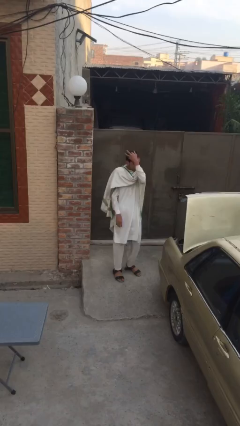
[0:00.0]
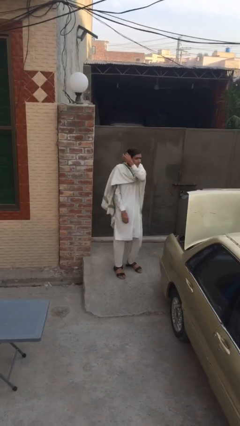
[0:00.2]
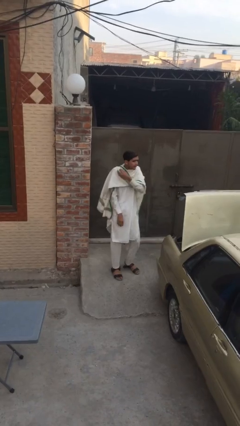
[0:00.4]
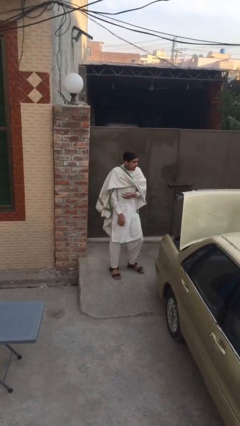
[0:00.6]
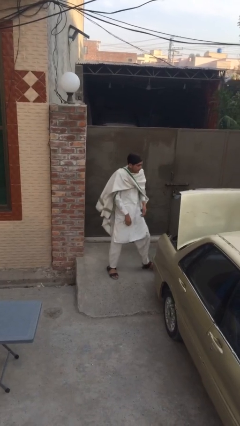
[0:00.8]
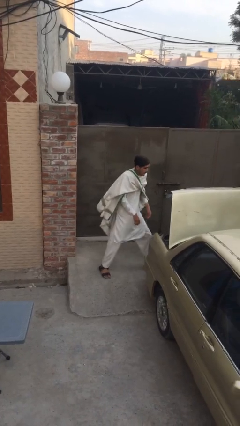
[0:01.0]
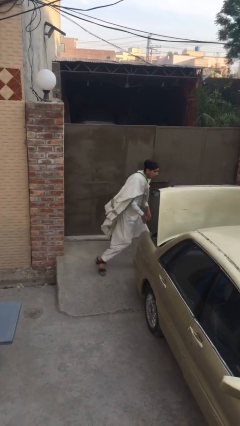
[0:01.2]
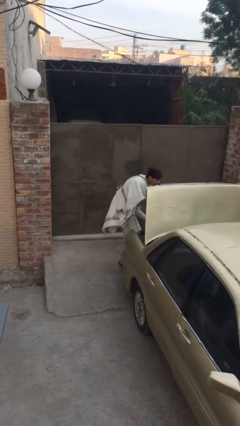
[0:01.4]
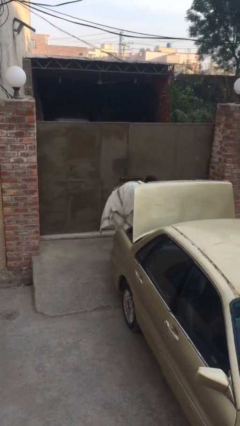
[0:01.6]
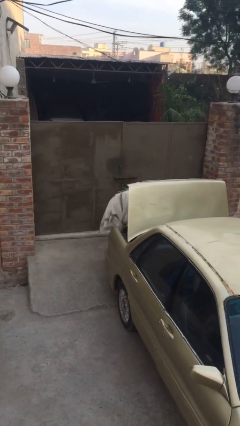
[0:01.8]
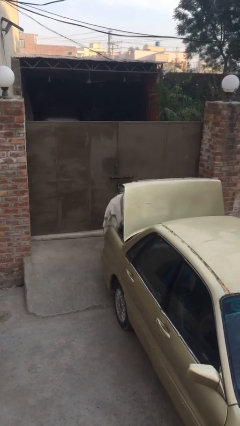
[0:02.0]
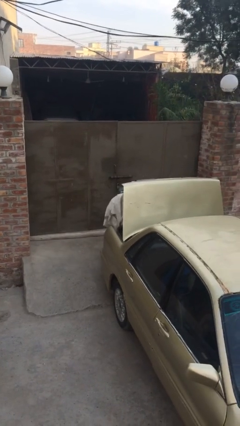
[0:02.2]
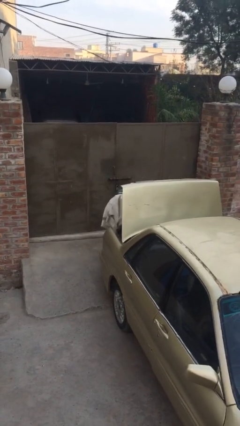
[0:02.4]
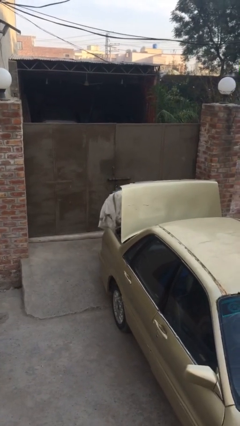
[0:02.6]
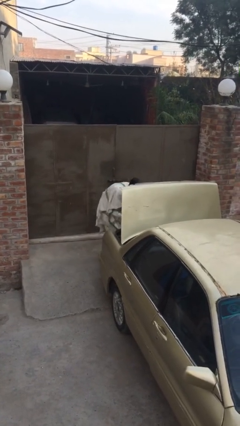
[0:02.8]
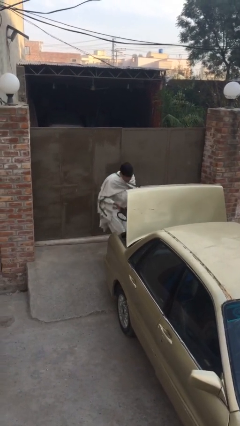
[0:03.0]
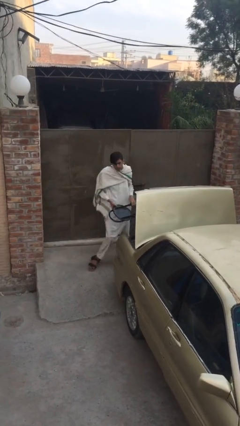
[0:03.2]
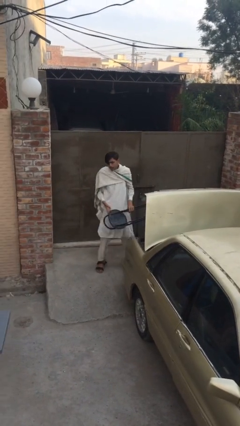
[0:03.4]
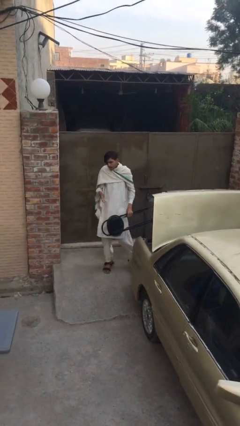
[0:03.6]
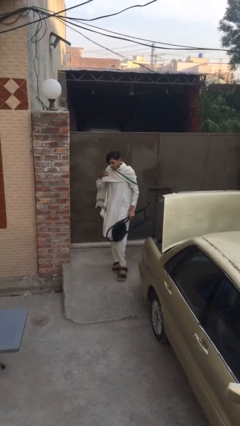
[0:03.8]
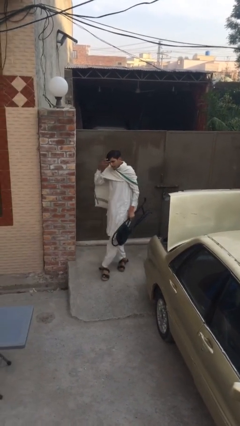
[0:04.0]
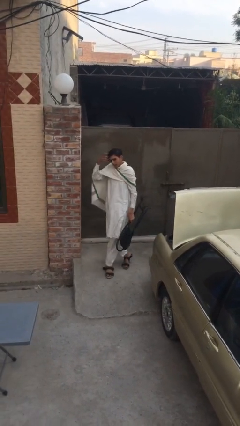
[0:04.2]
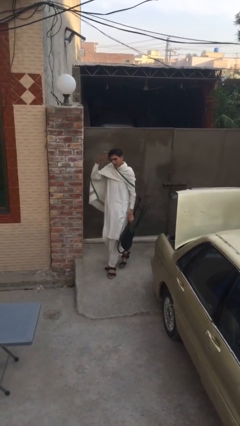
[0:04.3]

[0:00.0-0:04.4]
person unloads car

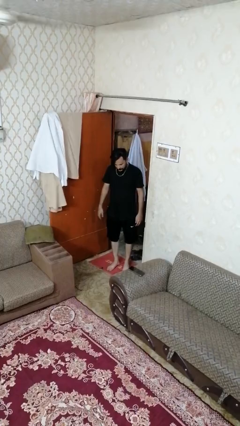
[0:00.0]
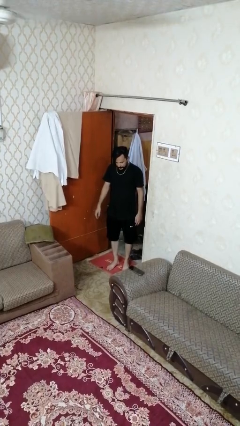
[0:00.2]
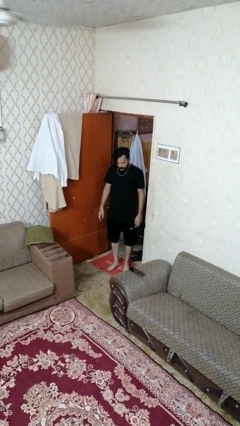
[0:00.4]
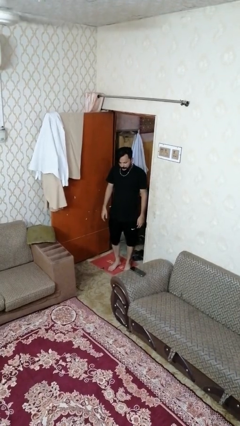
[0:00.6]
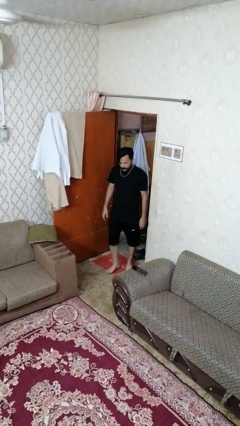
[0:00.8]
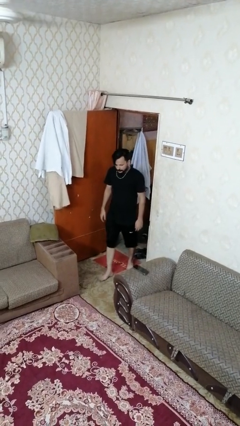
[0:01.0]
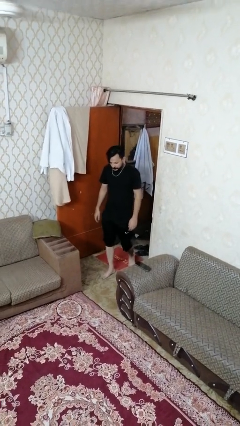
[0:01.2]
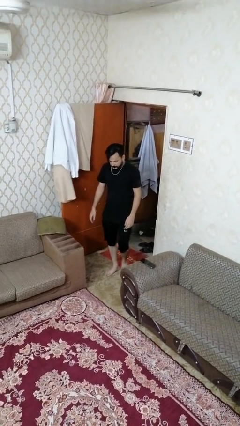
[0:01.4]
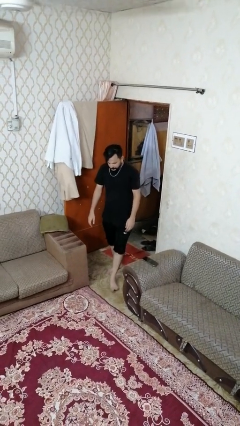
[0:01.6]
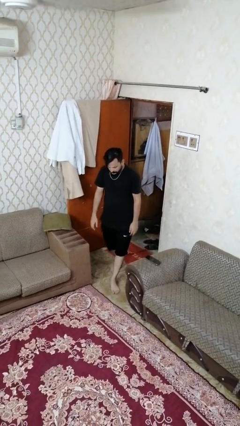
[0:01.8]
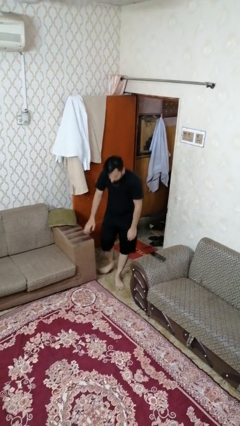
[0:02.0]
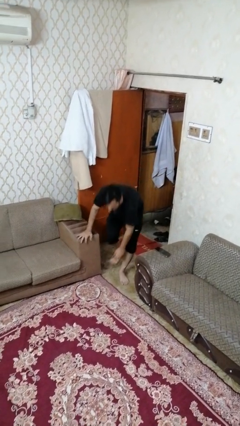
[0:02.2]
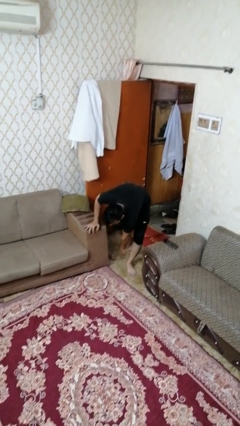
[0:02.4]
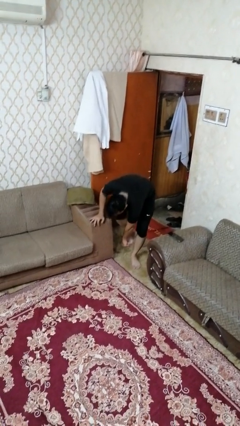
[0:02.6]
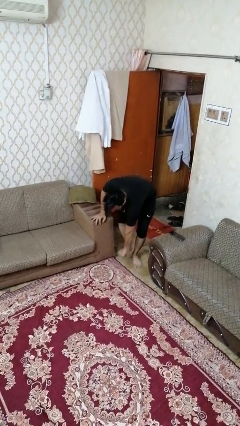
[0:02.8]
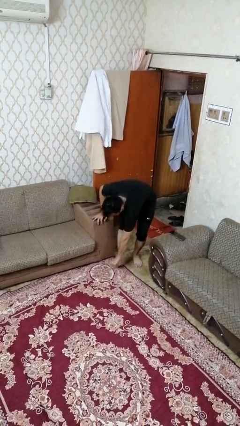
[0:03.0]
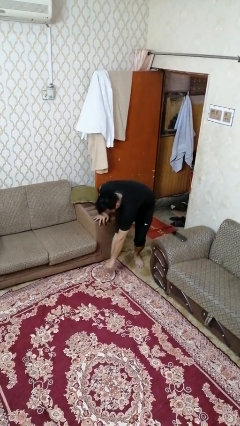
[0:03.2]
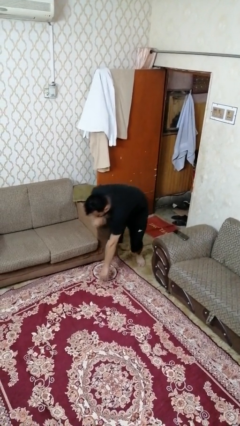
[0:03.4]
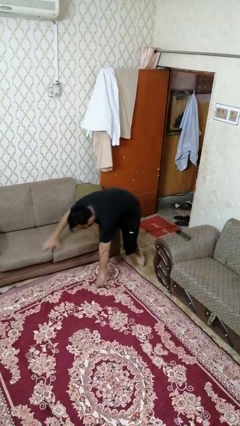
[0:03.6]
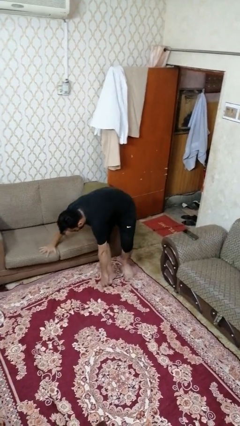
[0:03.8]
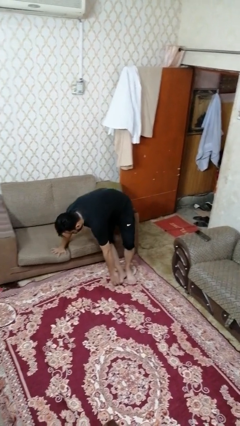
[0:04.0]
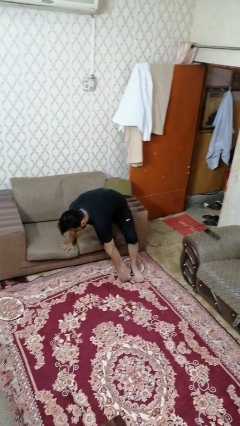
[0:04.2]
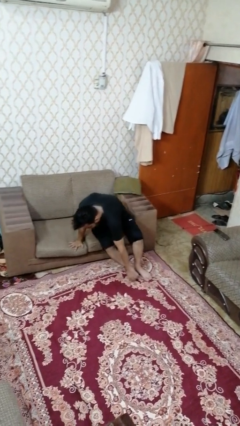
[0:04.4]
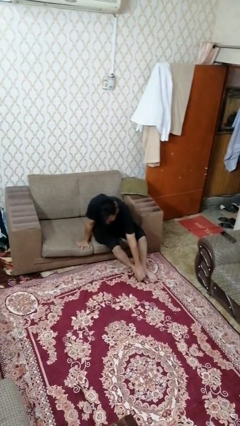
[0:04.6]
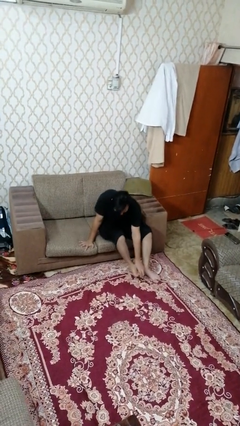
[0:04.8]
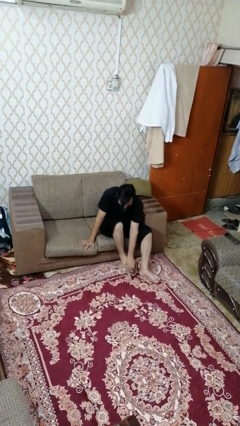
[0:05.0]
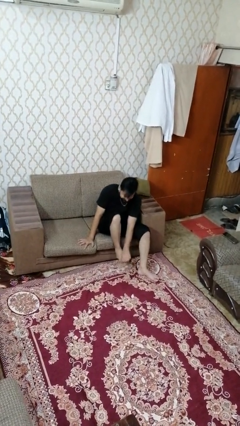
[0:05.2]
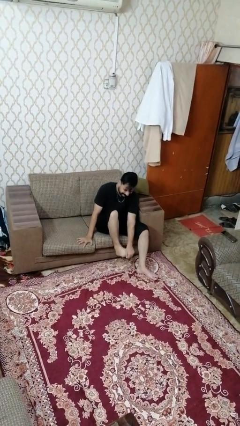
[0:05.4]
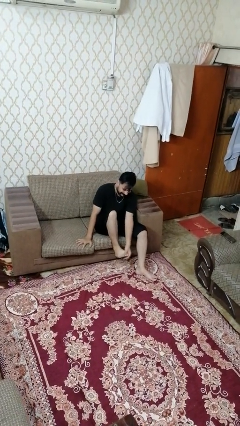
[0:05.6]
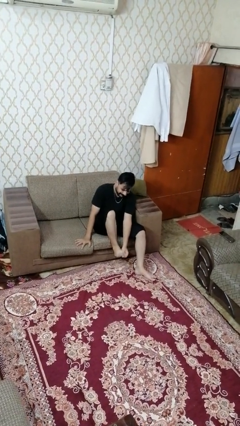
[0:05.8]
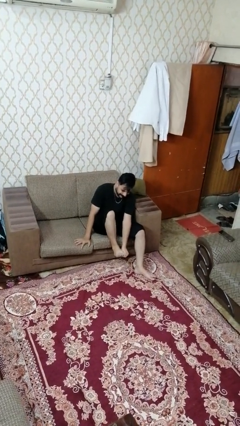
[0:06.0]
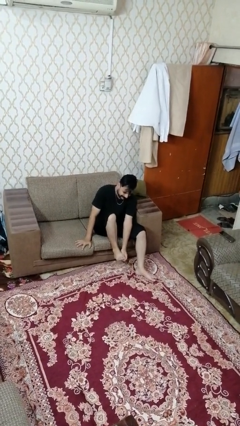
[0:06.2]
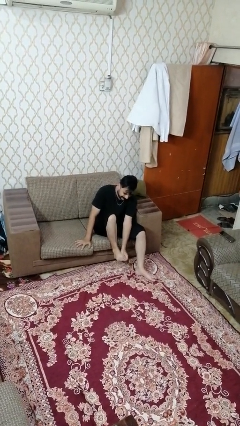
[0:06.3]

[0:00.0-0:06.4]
person stubs toe

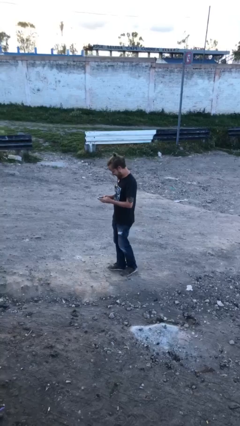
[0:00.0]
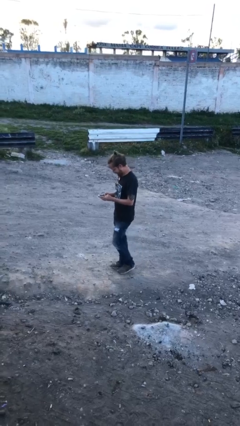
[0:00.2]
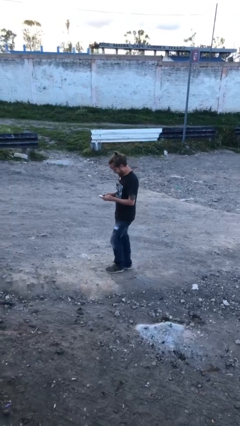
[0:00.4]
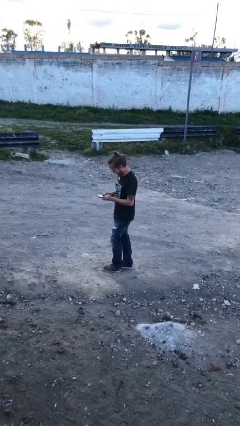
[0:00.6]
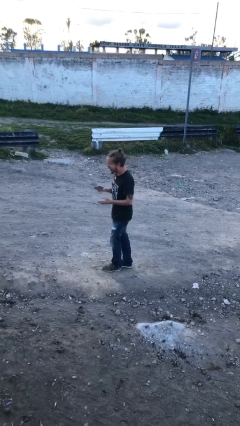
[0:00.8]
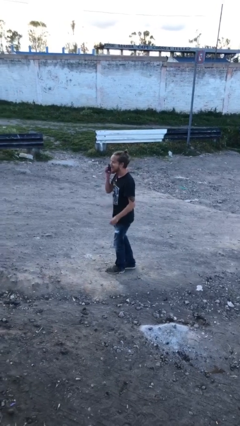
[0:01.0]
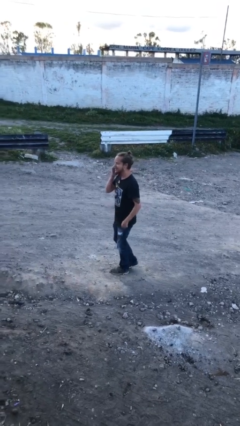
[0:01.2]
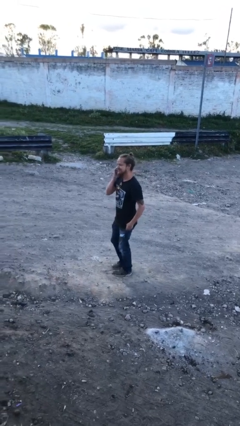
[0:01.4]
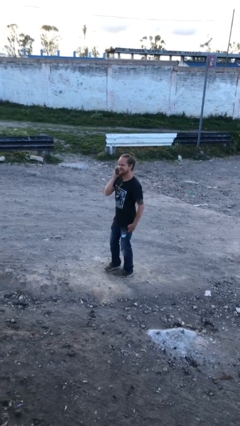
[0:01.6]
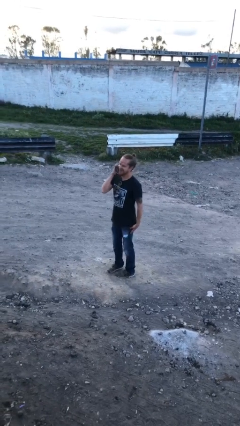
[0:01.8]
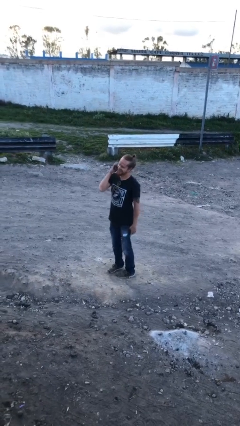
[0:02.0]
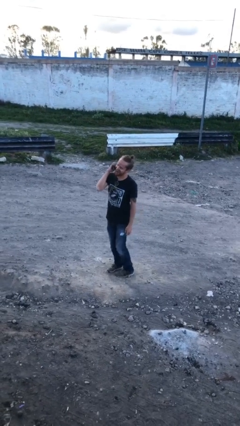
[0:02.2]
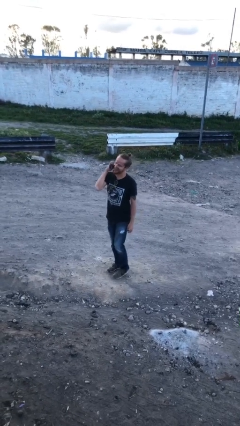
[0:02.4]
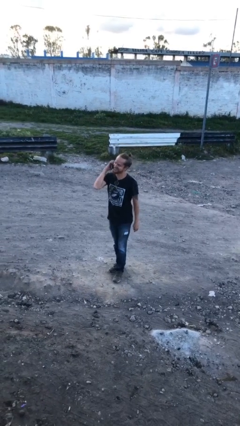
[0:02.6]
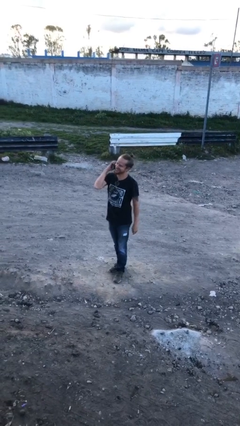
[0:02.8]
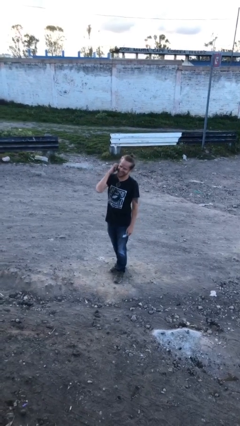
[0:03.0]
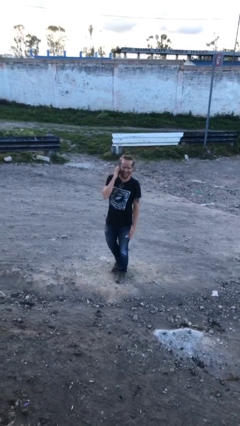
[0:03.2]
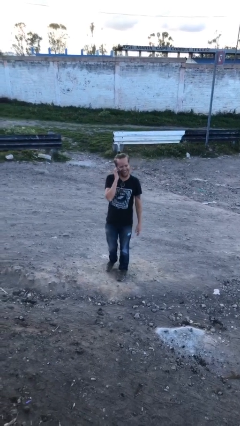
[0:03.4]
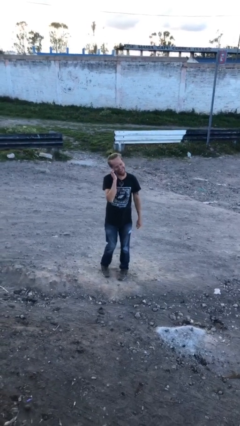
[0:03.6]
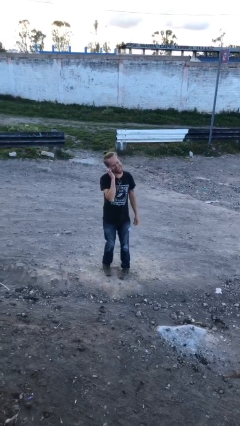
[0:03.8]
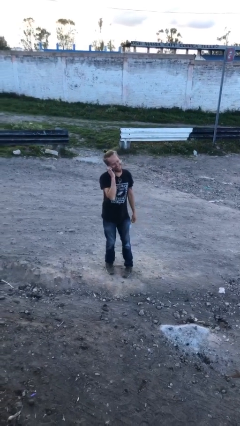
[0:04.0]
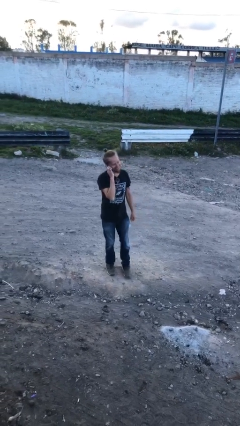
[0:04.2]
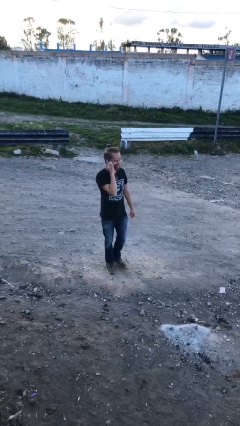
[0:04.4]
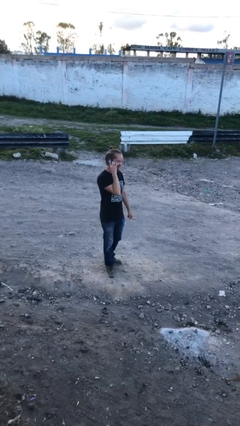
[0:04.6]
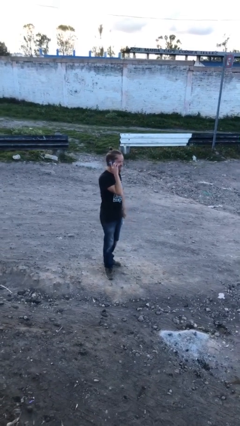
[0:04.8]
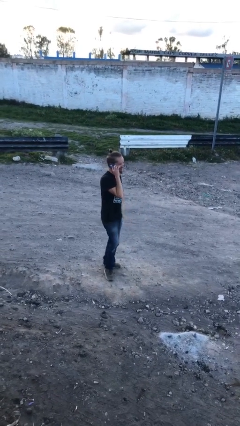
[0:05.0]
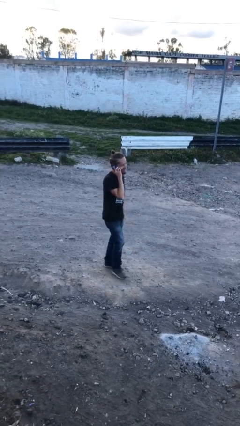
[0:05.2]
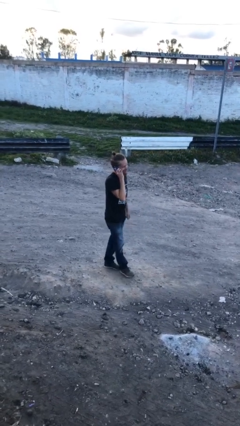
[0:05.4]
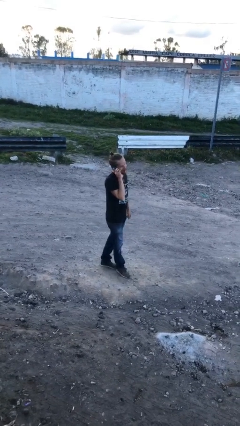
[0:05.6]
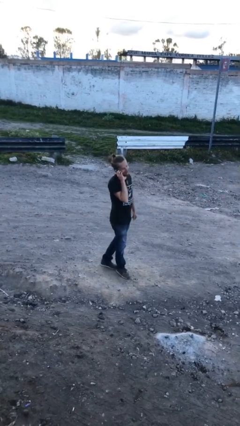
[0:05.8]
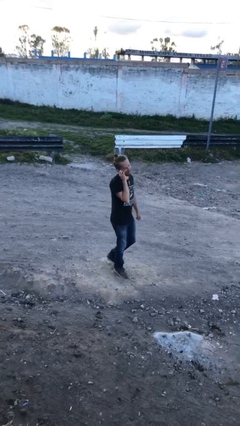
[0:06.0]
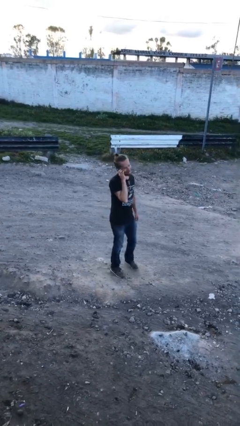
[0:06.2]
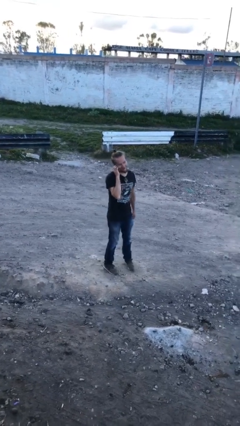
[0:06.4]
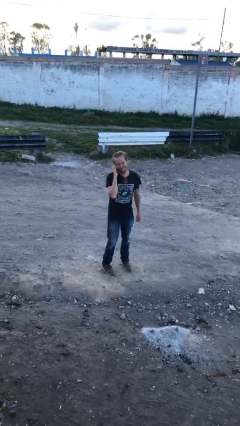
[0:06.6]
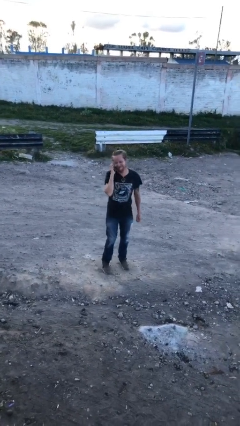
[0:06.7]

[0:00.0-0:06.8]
person talks on phone
